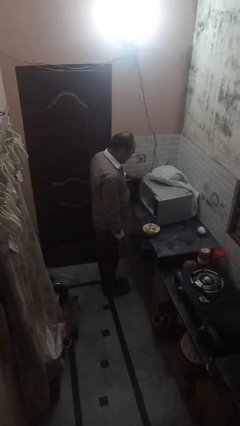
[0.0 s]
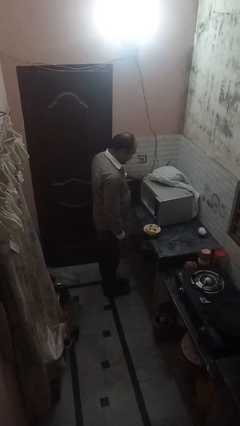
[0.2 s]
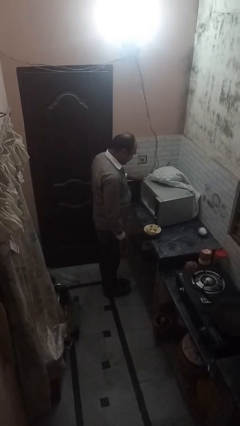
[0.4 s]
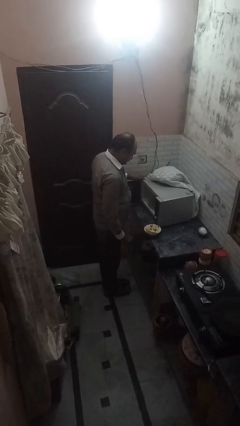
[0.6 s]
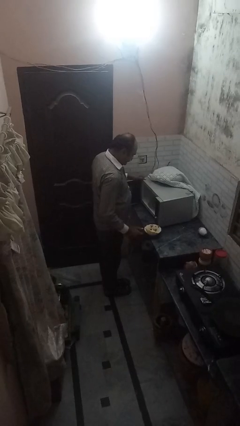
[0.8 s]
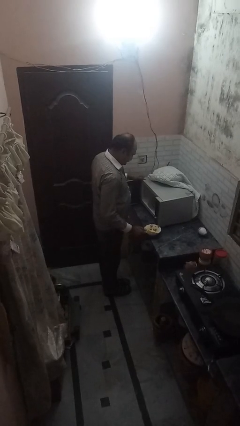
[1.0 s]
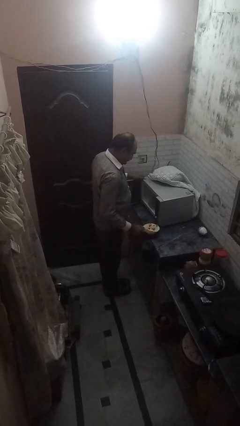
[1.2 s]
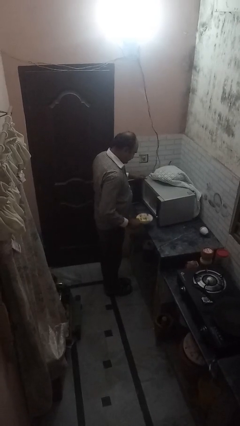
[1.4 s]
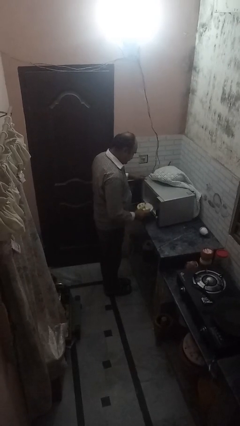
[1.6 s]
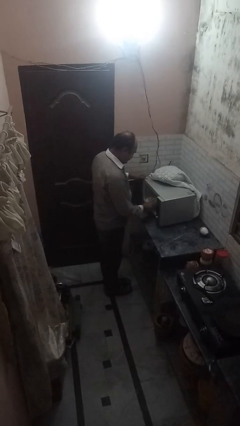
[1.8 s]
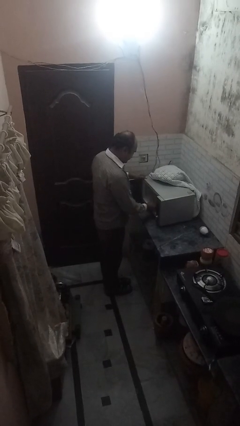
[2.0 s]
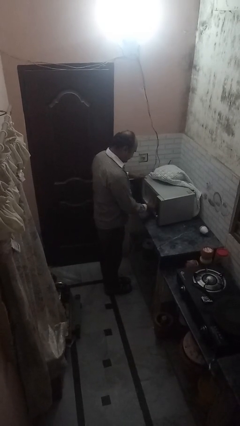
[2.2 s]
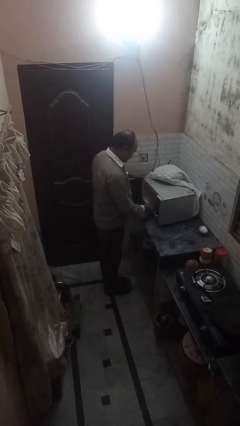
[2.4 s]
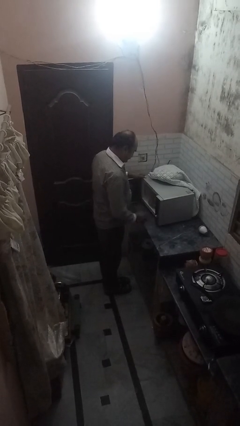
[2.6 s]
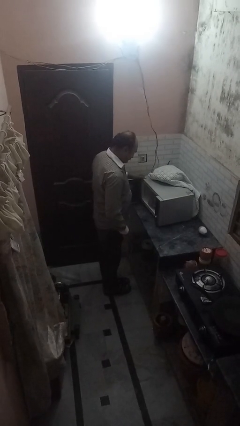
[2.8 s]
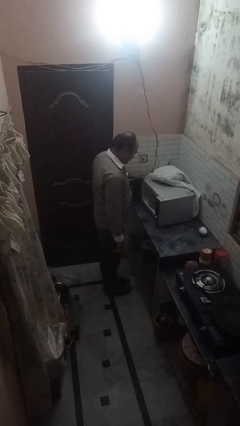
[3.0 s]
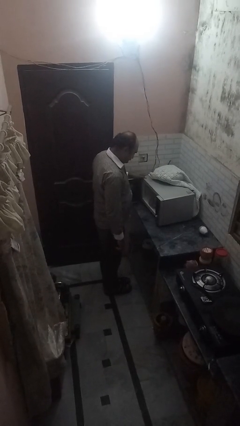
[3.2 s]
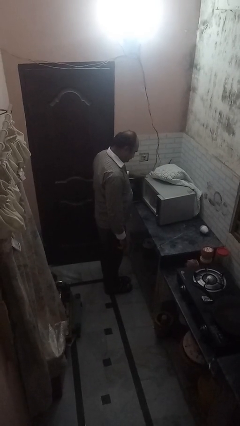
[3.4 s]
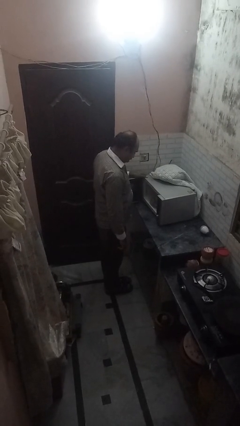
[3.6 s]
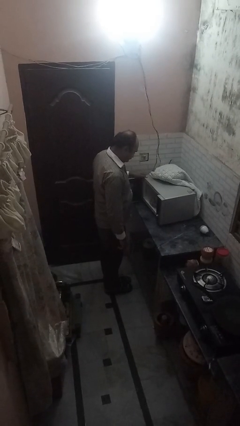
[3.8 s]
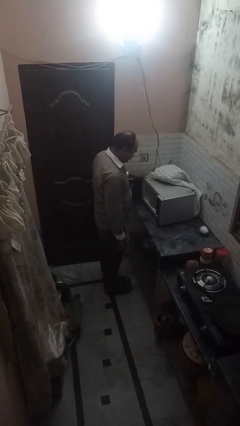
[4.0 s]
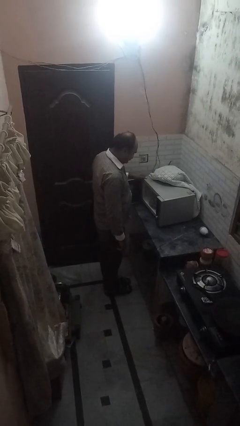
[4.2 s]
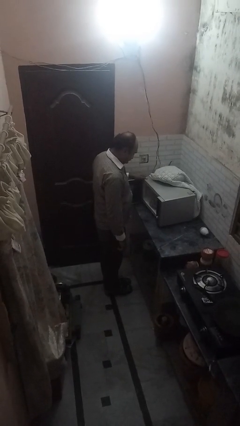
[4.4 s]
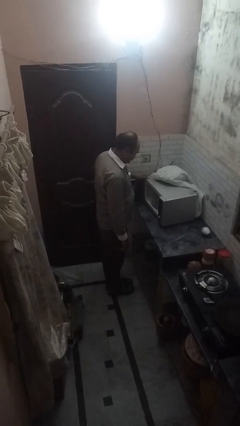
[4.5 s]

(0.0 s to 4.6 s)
person puts object into microwave

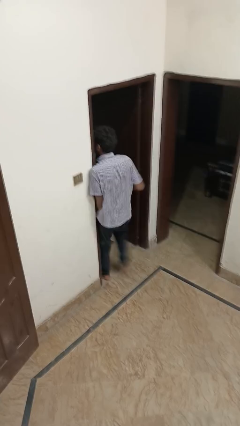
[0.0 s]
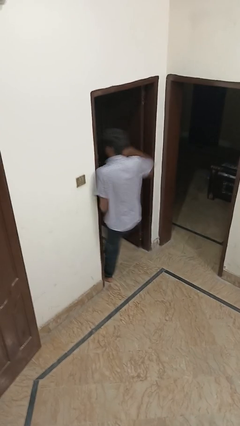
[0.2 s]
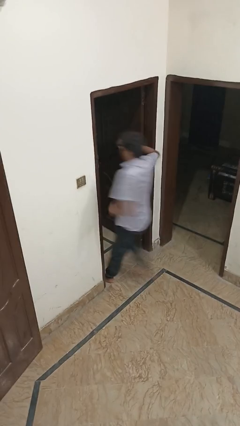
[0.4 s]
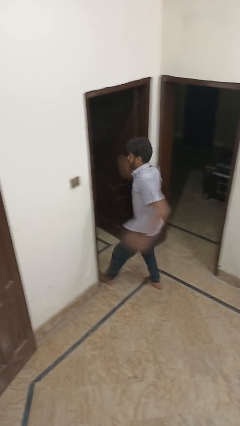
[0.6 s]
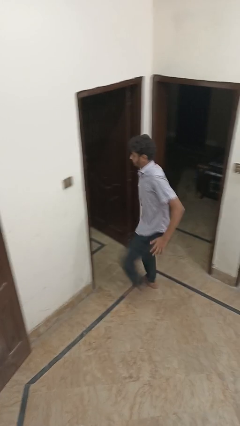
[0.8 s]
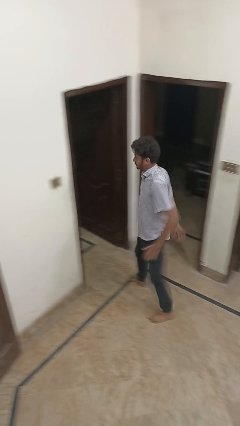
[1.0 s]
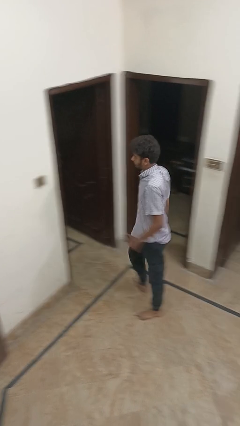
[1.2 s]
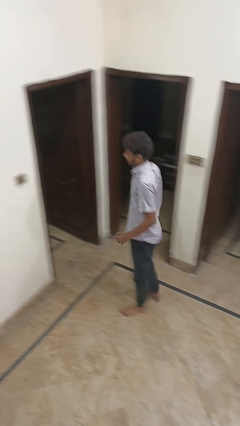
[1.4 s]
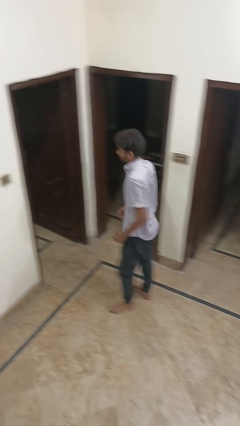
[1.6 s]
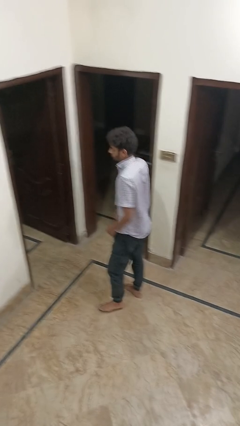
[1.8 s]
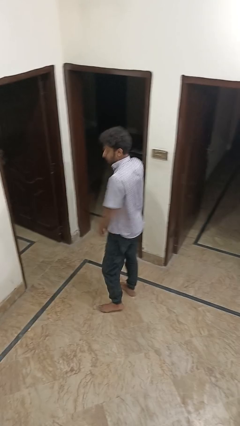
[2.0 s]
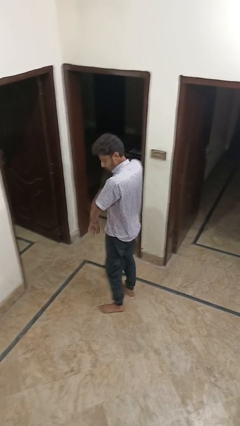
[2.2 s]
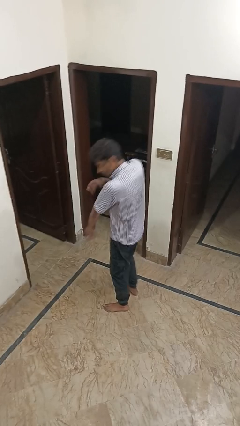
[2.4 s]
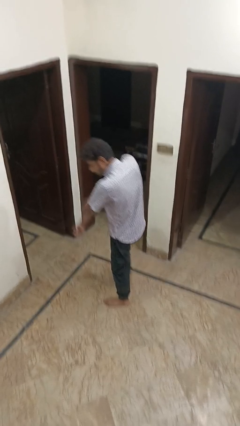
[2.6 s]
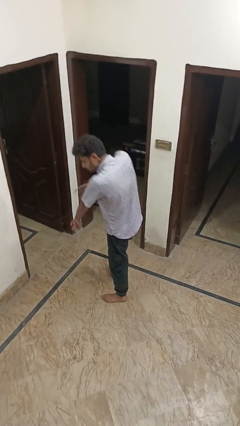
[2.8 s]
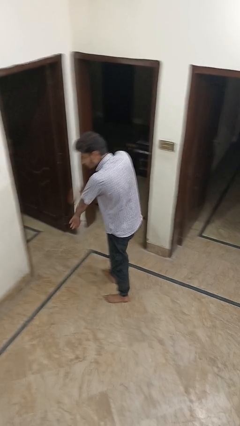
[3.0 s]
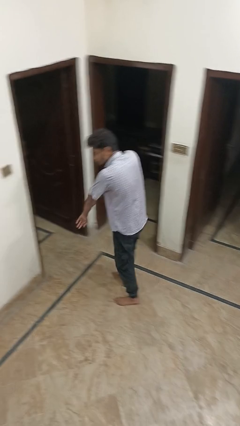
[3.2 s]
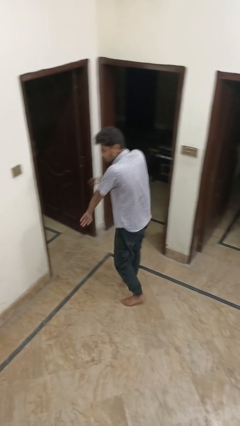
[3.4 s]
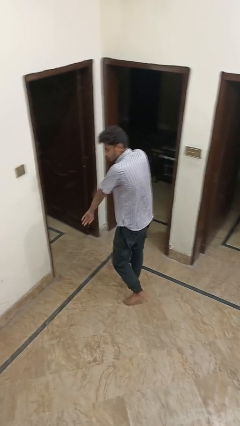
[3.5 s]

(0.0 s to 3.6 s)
person bumps into wall

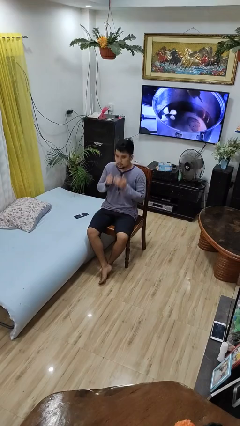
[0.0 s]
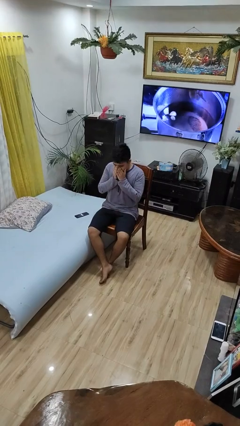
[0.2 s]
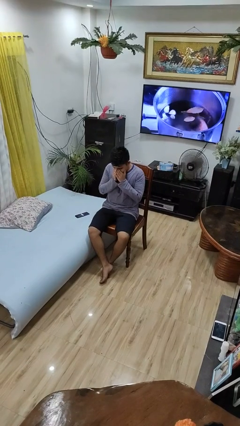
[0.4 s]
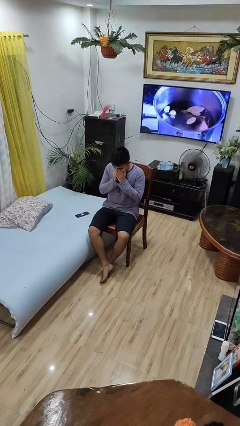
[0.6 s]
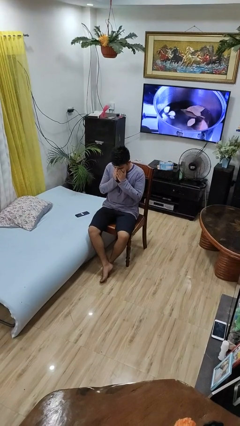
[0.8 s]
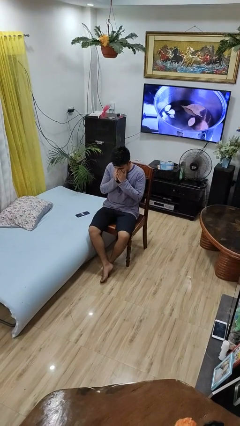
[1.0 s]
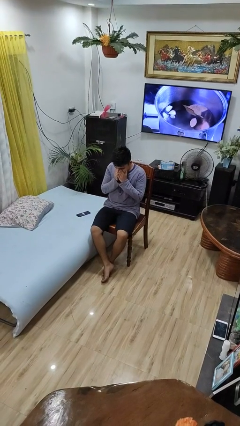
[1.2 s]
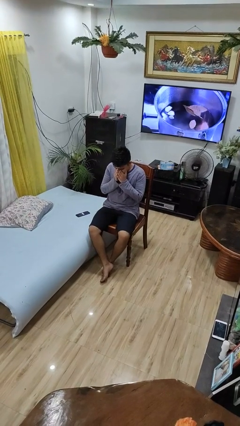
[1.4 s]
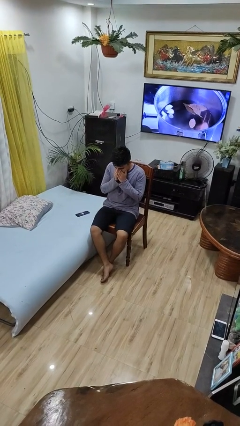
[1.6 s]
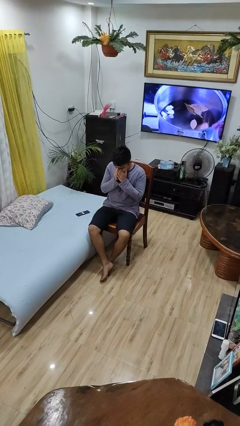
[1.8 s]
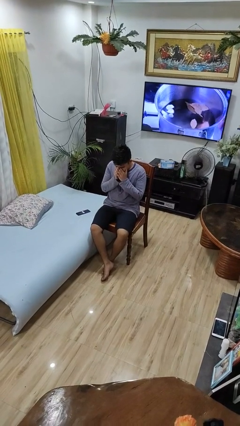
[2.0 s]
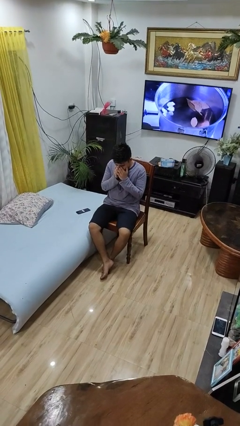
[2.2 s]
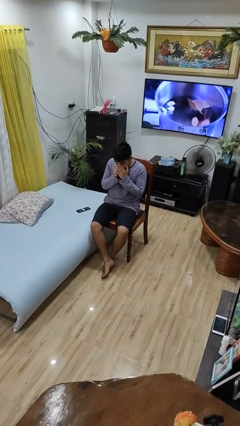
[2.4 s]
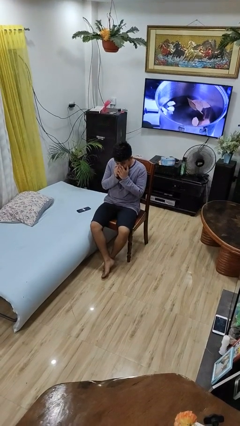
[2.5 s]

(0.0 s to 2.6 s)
person sneezes into hand

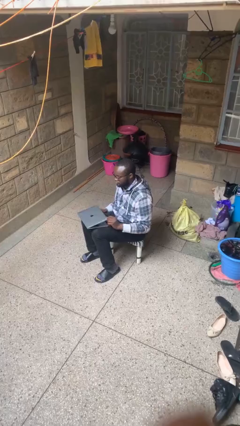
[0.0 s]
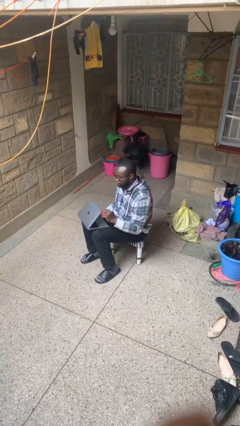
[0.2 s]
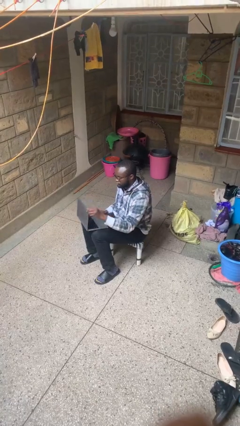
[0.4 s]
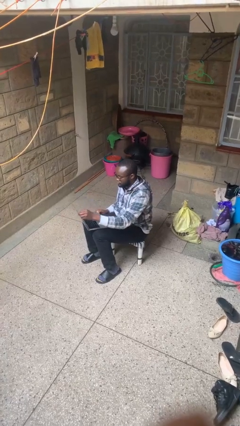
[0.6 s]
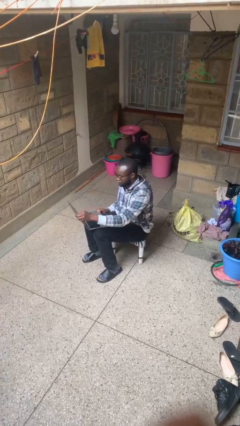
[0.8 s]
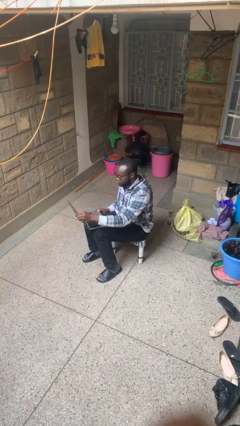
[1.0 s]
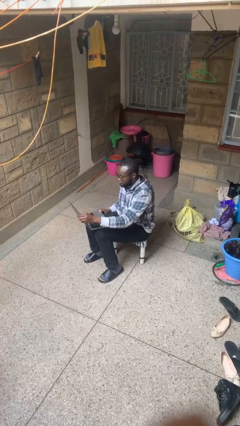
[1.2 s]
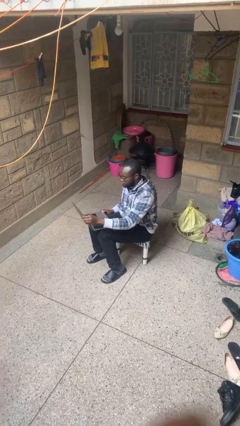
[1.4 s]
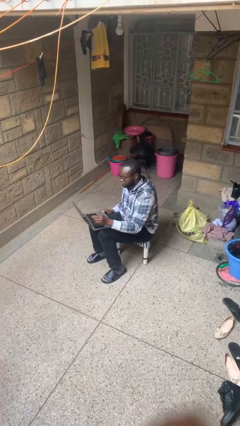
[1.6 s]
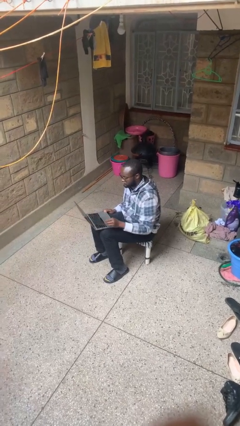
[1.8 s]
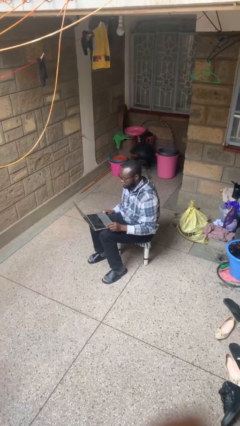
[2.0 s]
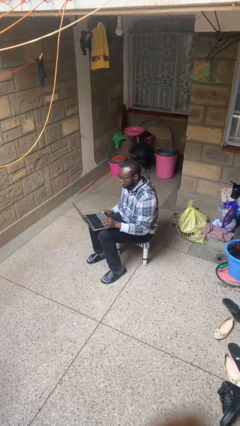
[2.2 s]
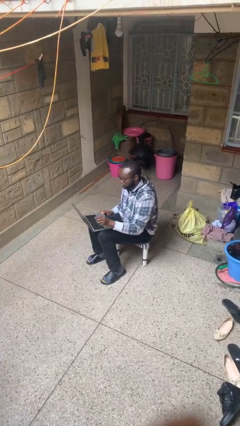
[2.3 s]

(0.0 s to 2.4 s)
person opens laptop

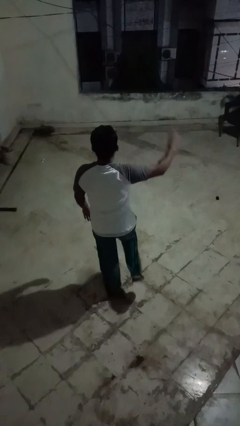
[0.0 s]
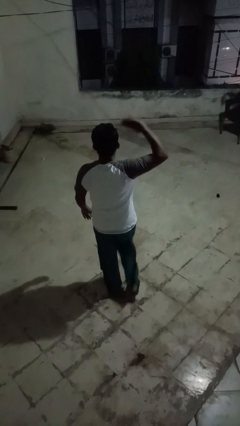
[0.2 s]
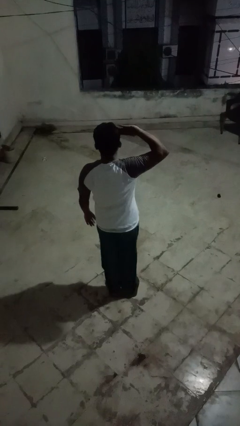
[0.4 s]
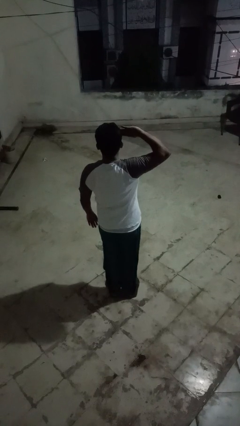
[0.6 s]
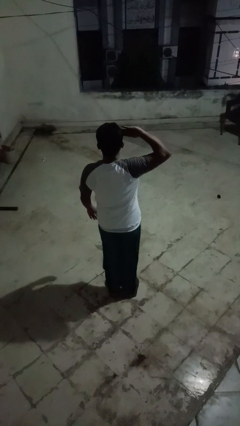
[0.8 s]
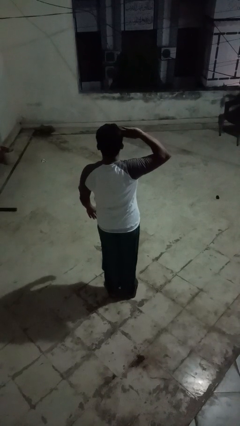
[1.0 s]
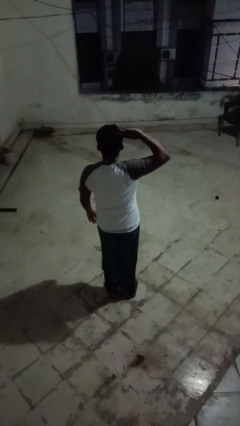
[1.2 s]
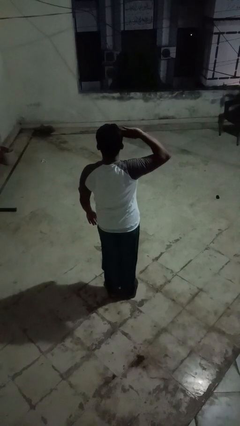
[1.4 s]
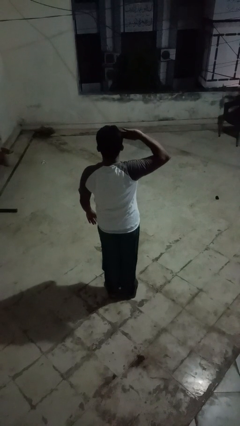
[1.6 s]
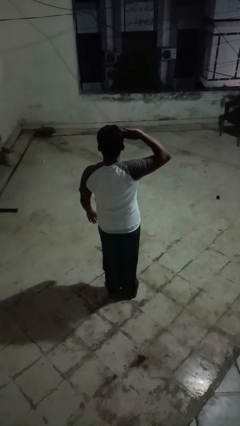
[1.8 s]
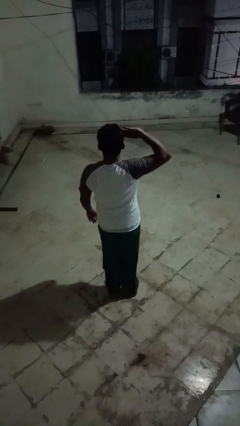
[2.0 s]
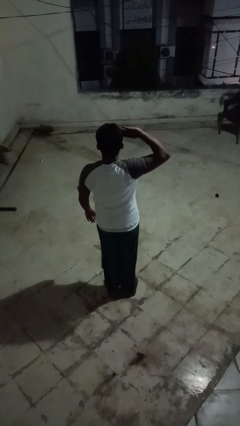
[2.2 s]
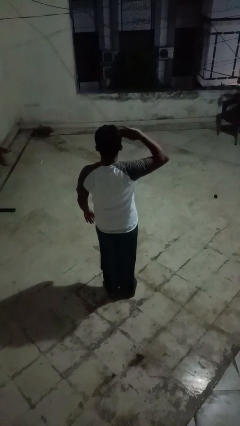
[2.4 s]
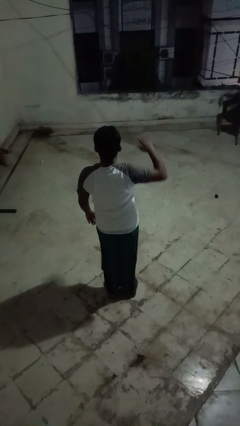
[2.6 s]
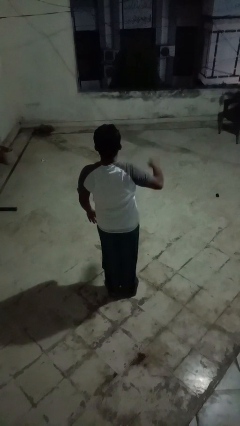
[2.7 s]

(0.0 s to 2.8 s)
person salutes

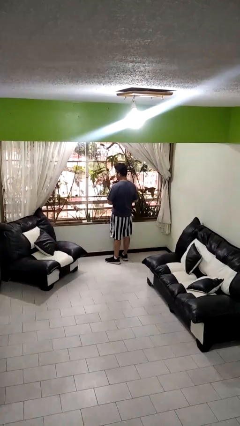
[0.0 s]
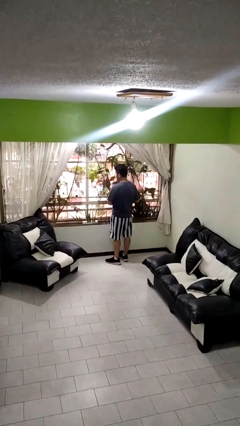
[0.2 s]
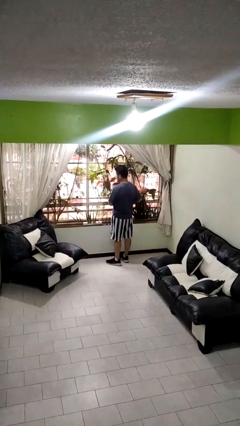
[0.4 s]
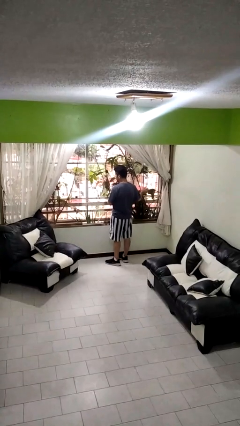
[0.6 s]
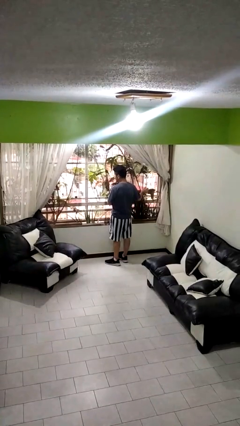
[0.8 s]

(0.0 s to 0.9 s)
person opens home window

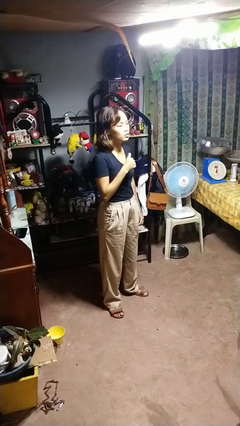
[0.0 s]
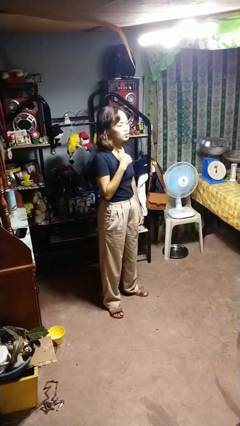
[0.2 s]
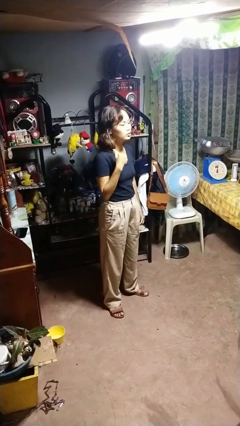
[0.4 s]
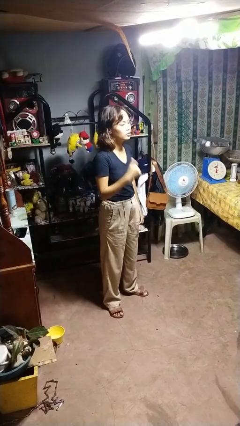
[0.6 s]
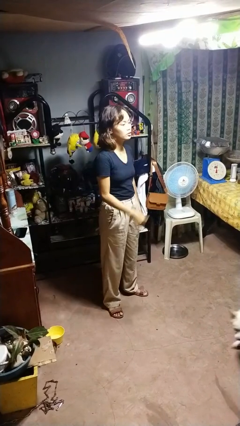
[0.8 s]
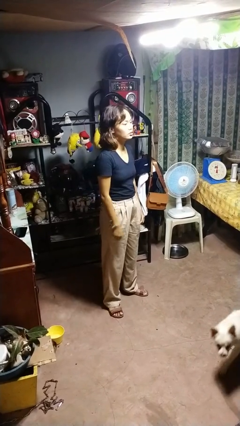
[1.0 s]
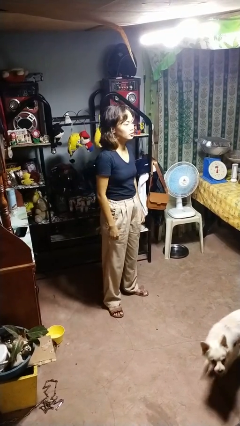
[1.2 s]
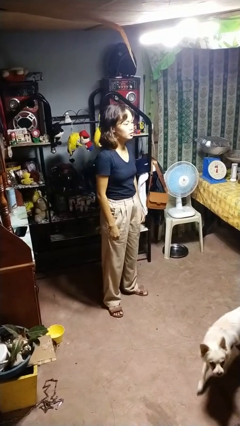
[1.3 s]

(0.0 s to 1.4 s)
person gestures cut
